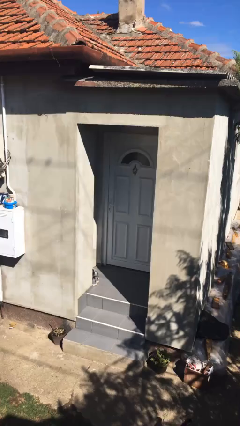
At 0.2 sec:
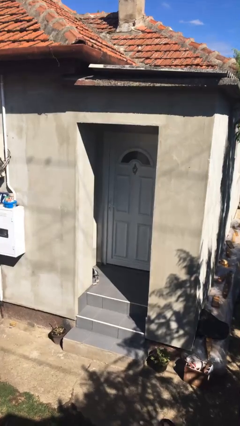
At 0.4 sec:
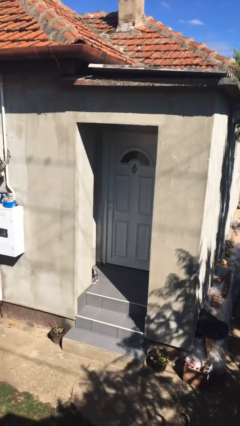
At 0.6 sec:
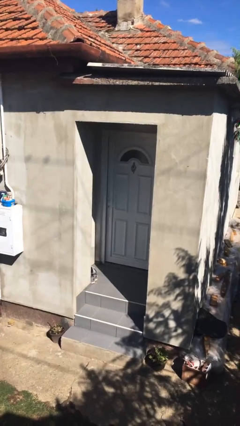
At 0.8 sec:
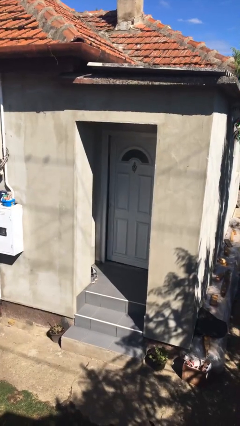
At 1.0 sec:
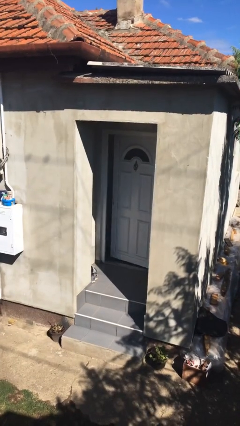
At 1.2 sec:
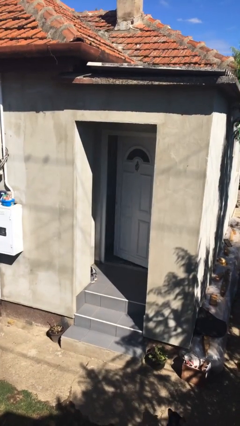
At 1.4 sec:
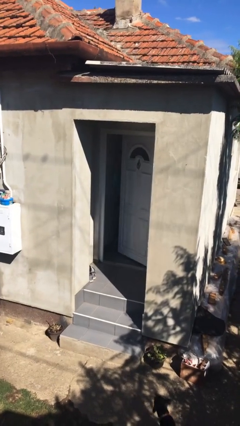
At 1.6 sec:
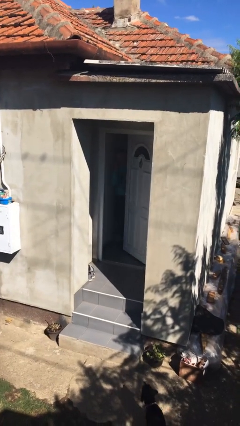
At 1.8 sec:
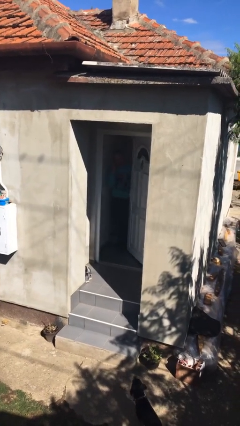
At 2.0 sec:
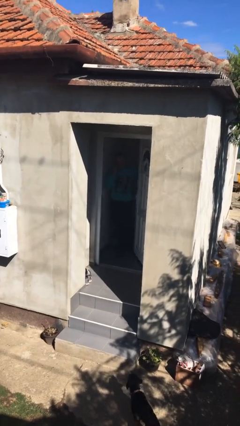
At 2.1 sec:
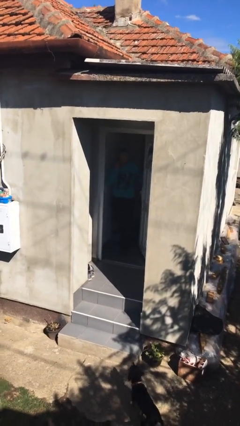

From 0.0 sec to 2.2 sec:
person opens facility door

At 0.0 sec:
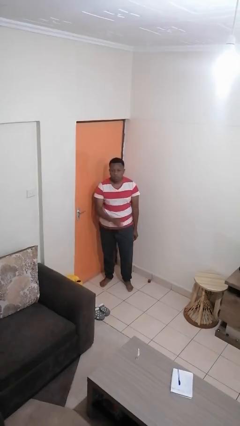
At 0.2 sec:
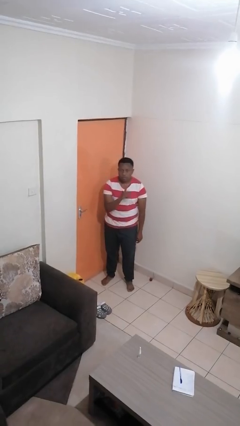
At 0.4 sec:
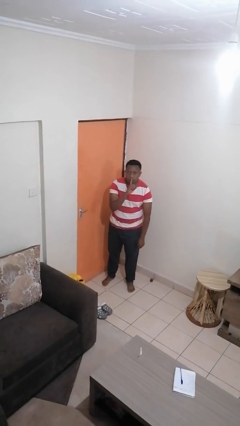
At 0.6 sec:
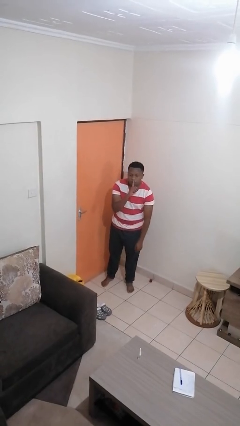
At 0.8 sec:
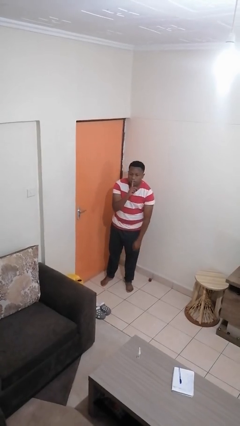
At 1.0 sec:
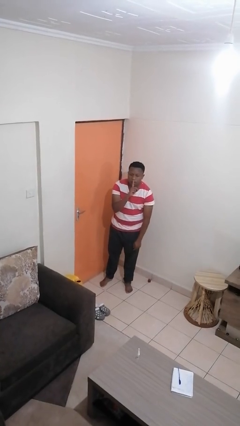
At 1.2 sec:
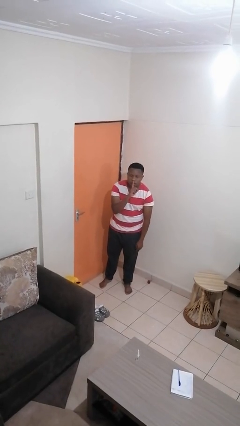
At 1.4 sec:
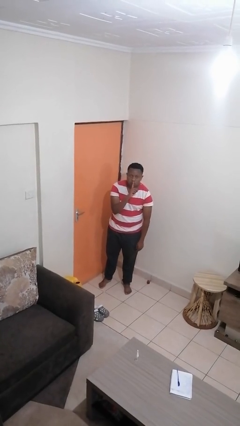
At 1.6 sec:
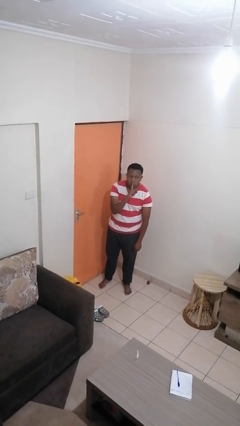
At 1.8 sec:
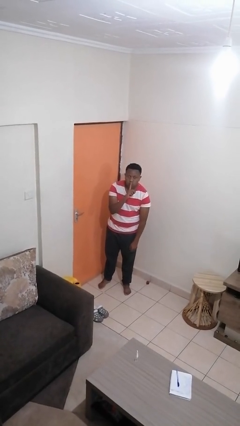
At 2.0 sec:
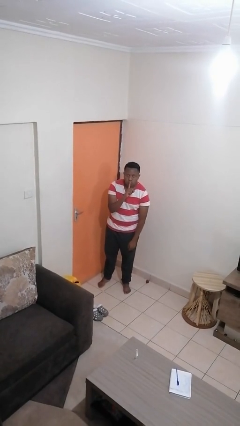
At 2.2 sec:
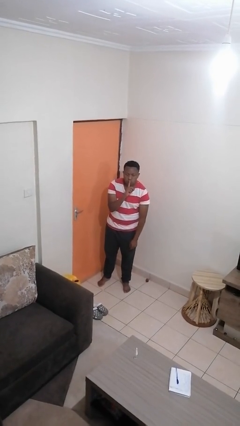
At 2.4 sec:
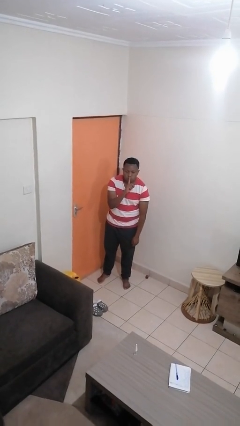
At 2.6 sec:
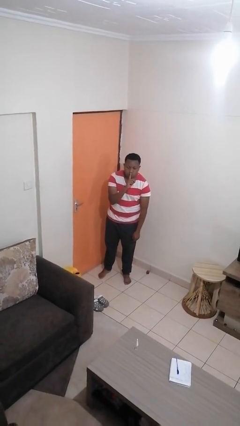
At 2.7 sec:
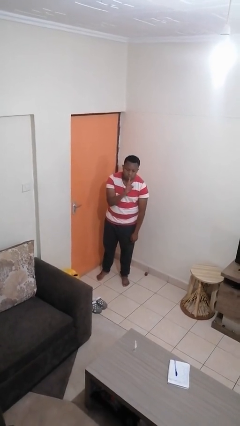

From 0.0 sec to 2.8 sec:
person gestures be quiet

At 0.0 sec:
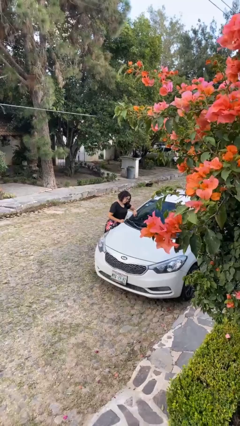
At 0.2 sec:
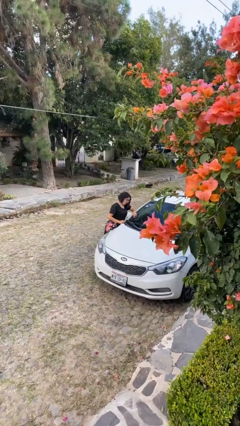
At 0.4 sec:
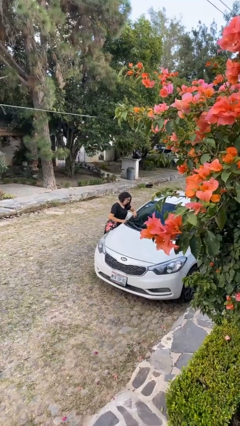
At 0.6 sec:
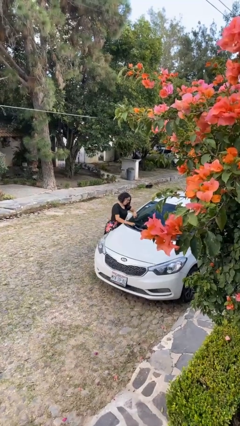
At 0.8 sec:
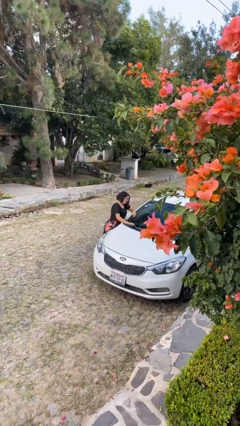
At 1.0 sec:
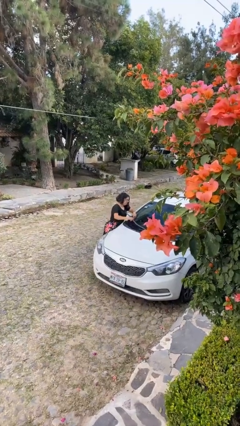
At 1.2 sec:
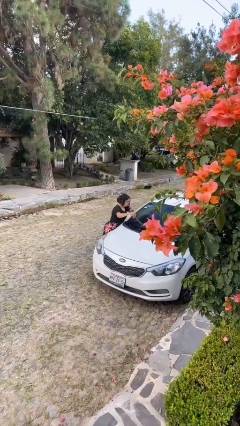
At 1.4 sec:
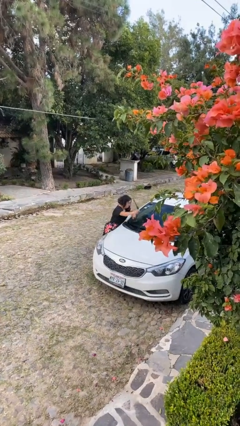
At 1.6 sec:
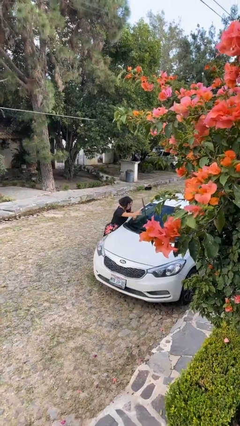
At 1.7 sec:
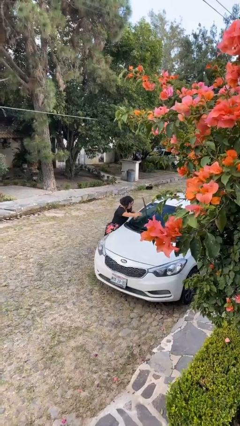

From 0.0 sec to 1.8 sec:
person flips up car wipers

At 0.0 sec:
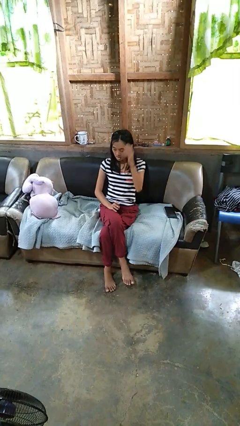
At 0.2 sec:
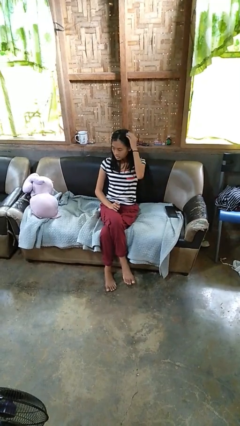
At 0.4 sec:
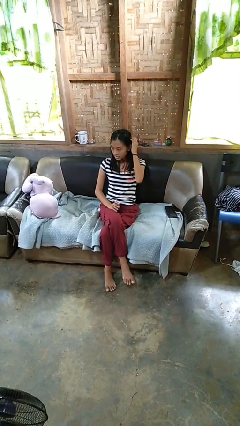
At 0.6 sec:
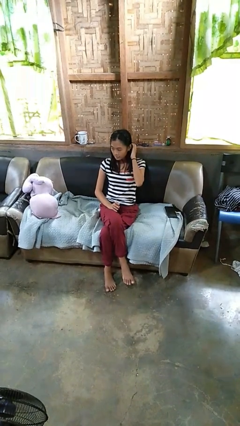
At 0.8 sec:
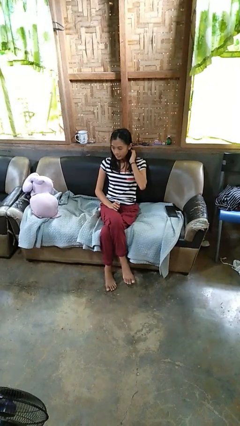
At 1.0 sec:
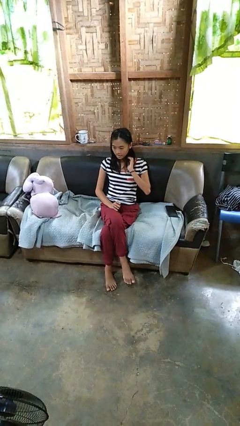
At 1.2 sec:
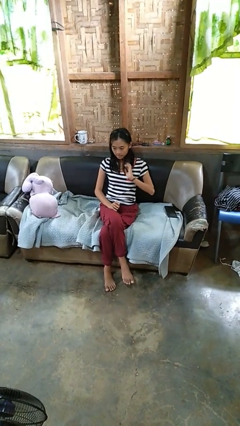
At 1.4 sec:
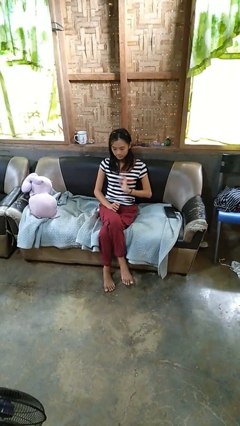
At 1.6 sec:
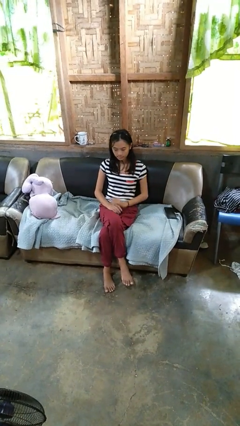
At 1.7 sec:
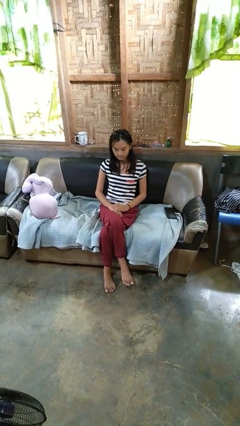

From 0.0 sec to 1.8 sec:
person strokes hair

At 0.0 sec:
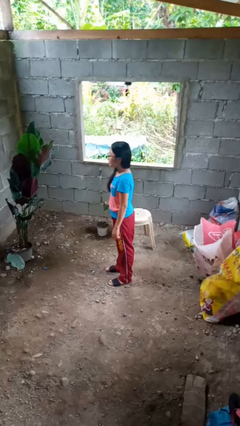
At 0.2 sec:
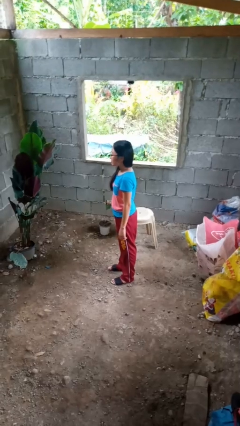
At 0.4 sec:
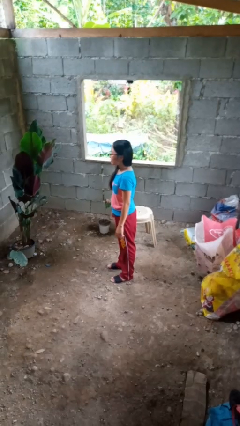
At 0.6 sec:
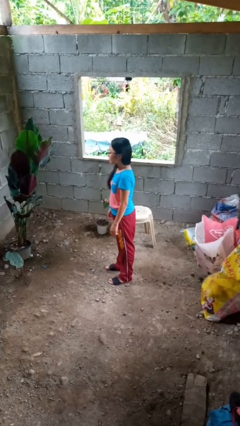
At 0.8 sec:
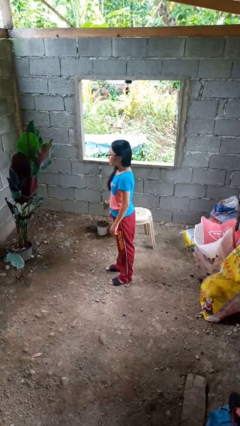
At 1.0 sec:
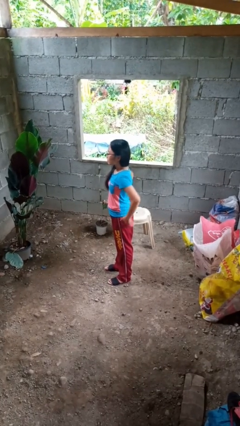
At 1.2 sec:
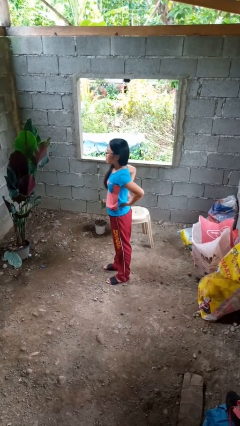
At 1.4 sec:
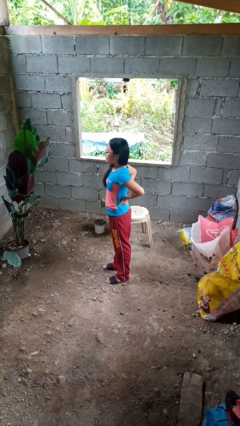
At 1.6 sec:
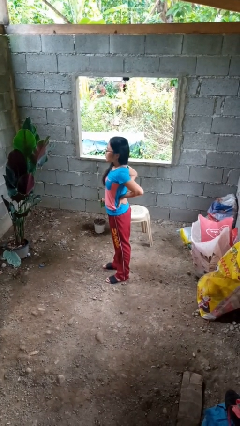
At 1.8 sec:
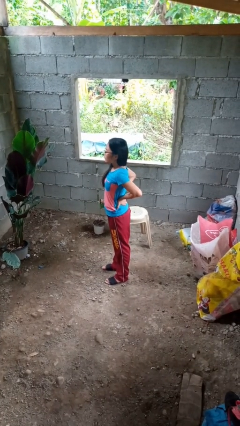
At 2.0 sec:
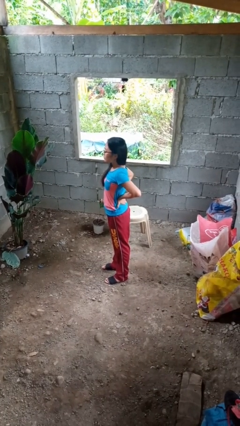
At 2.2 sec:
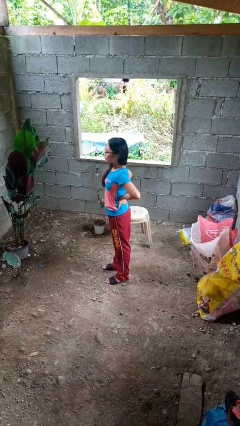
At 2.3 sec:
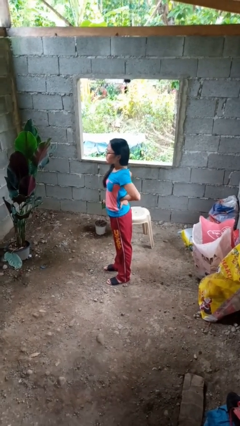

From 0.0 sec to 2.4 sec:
person stretches back

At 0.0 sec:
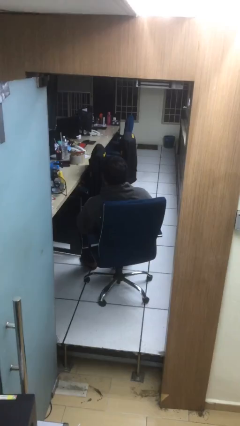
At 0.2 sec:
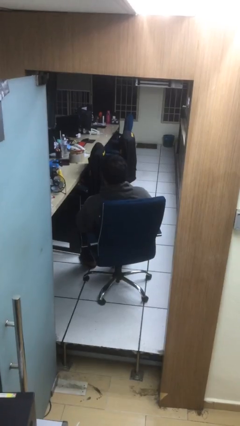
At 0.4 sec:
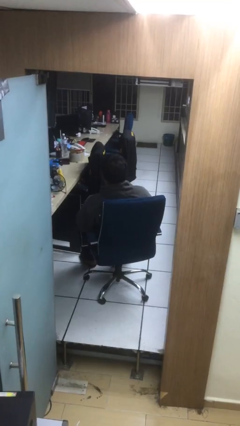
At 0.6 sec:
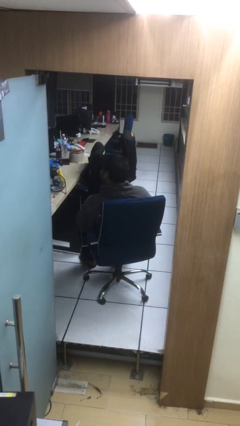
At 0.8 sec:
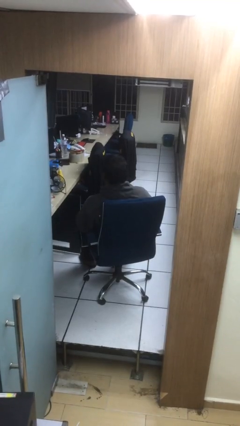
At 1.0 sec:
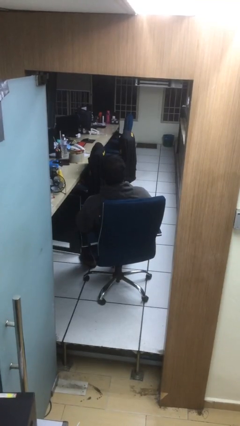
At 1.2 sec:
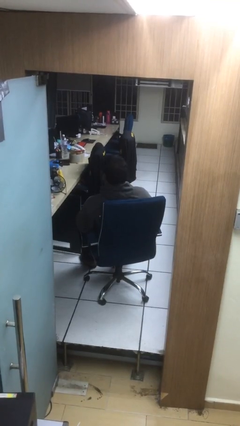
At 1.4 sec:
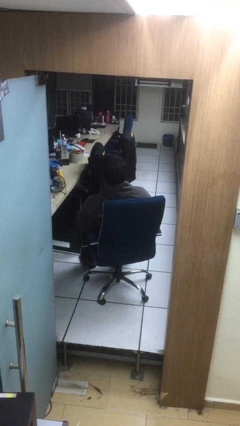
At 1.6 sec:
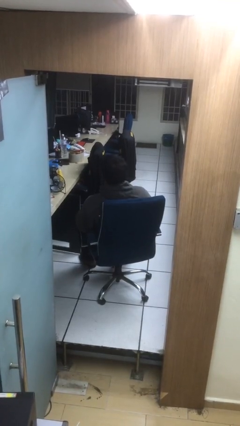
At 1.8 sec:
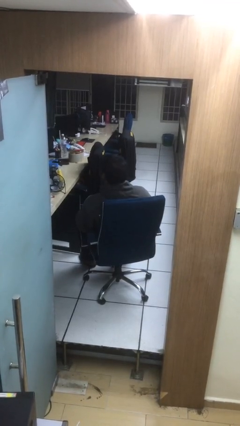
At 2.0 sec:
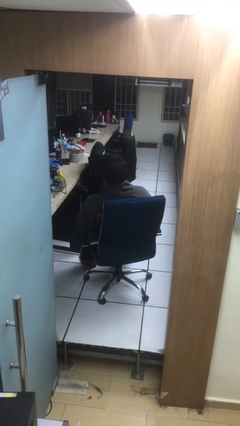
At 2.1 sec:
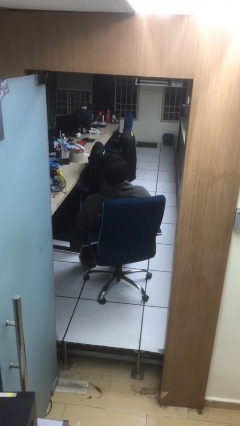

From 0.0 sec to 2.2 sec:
person shakes head

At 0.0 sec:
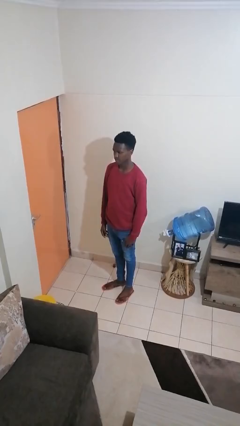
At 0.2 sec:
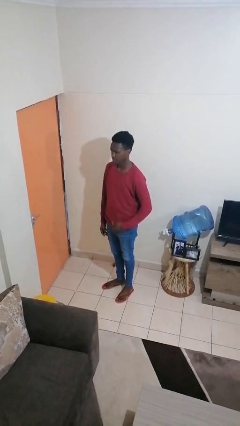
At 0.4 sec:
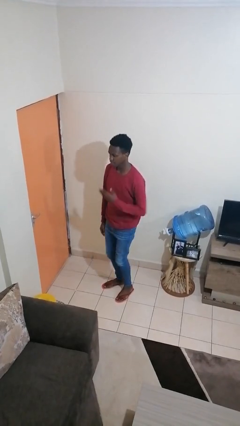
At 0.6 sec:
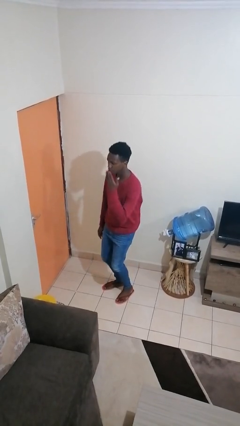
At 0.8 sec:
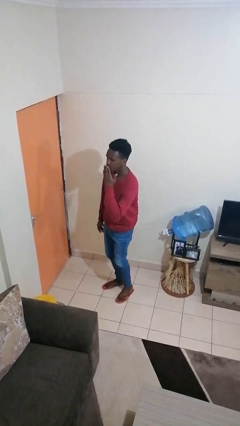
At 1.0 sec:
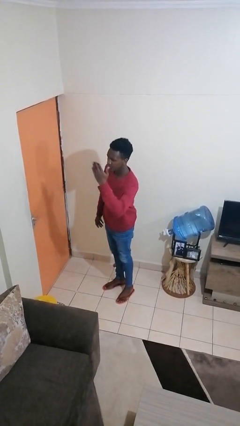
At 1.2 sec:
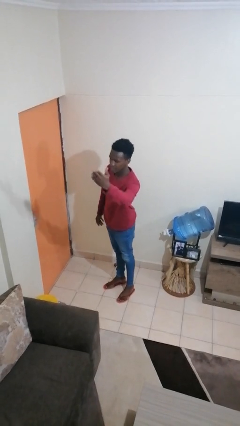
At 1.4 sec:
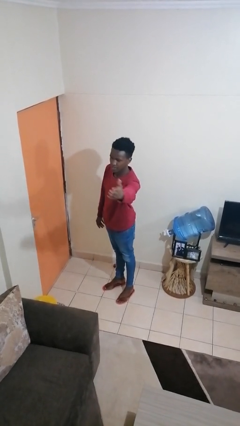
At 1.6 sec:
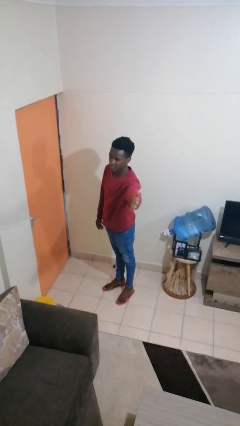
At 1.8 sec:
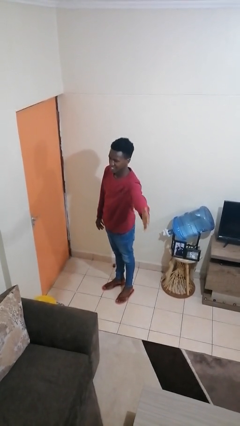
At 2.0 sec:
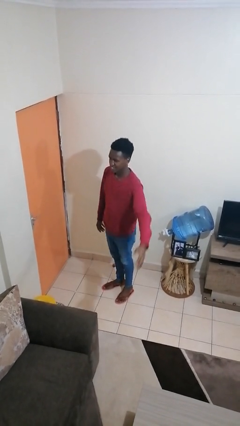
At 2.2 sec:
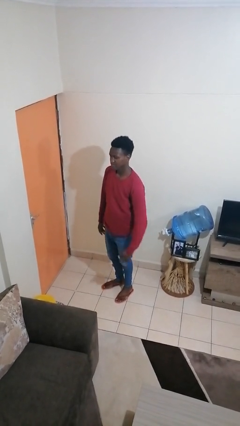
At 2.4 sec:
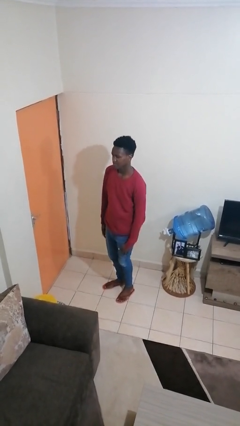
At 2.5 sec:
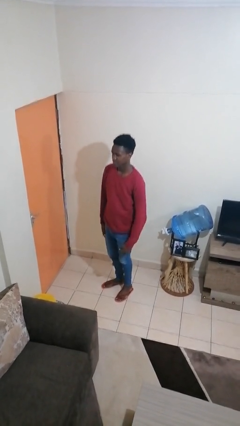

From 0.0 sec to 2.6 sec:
person gestures blow kiss

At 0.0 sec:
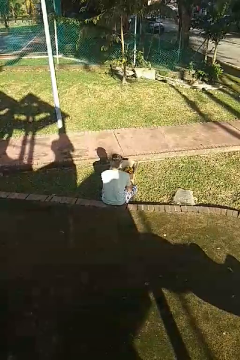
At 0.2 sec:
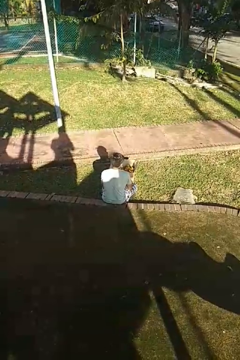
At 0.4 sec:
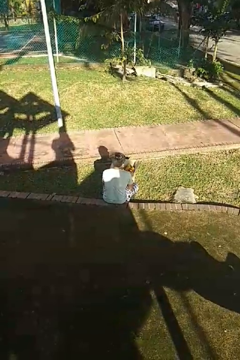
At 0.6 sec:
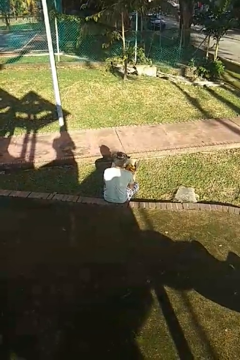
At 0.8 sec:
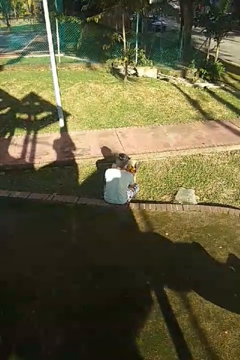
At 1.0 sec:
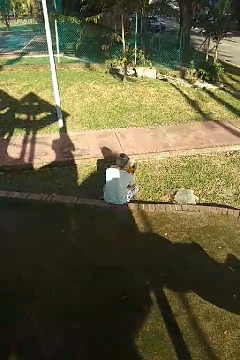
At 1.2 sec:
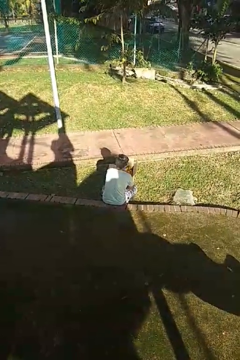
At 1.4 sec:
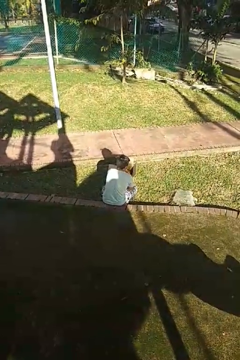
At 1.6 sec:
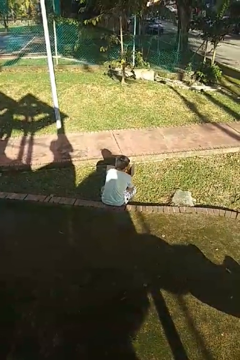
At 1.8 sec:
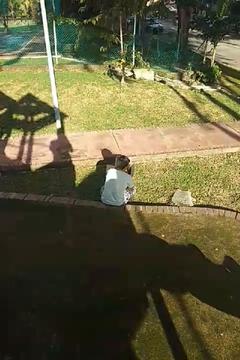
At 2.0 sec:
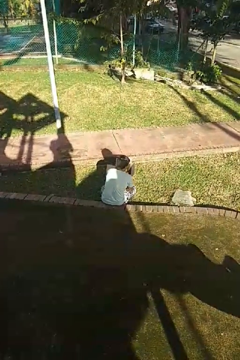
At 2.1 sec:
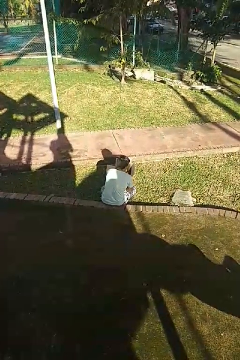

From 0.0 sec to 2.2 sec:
person searches in box
